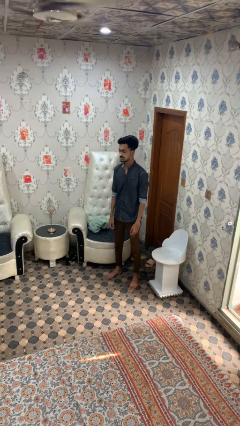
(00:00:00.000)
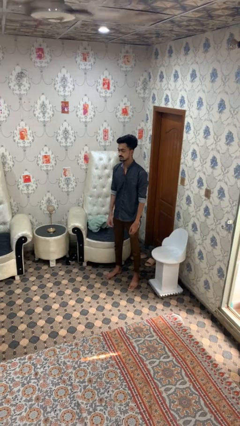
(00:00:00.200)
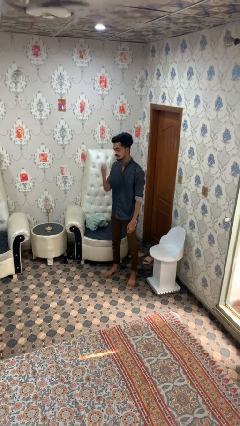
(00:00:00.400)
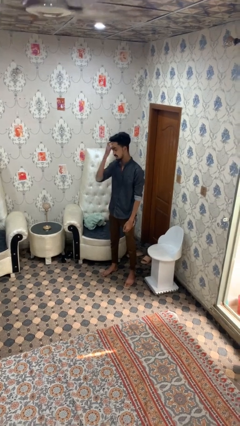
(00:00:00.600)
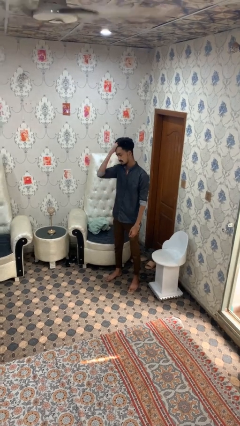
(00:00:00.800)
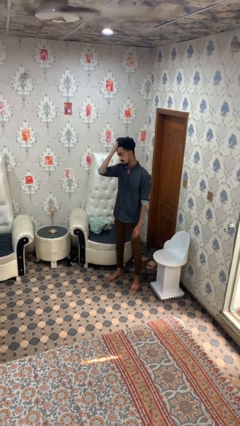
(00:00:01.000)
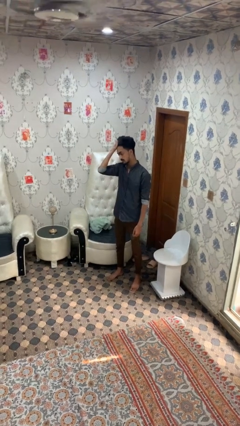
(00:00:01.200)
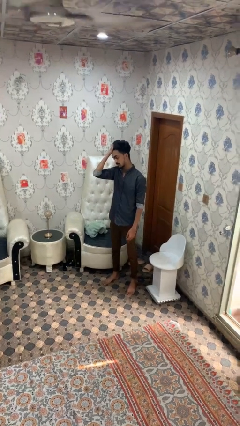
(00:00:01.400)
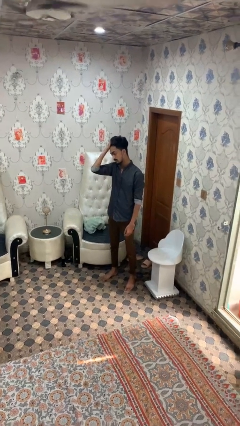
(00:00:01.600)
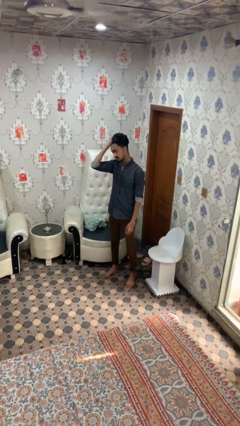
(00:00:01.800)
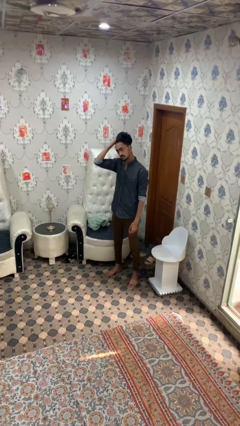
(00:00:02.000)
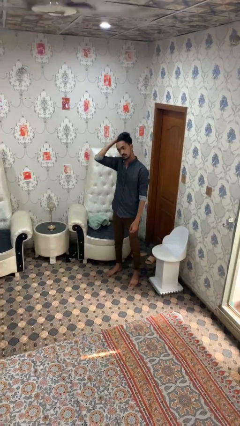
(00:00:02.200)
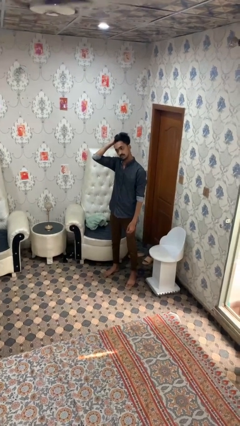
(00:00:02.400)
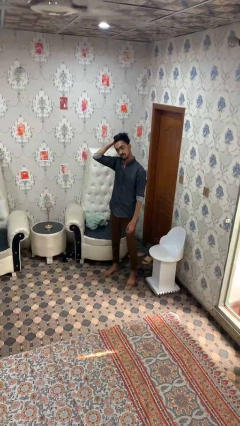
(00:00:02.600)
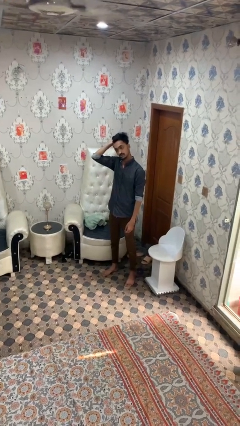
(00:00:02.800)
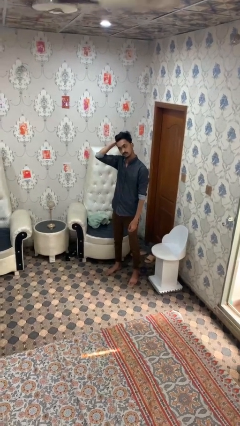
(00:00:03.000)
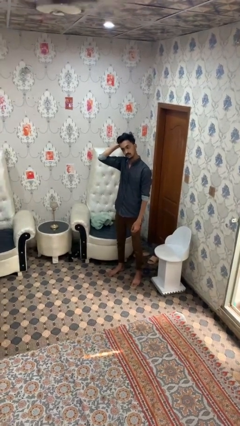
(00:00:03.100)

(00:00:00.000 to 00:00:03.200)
person strokes hair

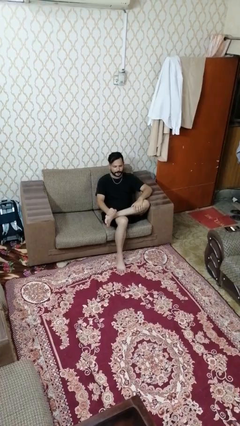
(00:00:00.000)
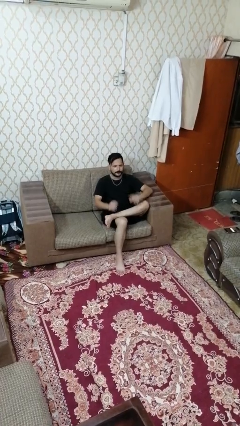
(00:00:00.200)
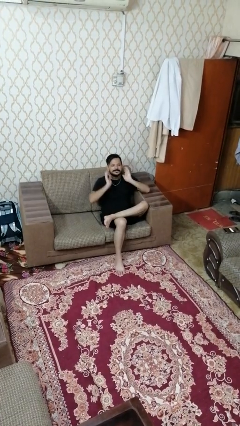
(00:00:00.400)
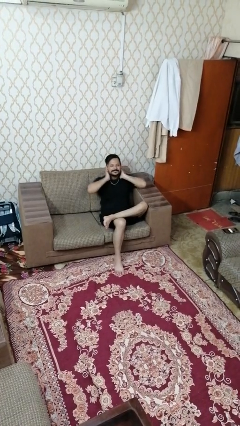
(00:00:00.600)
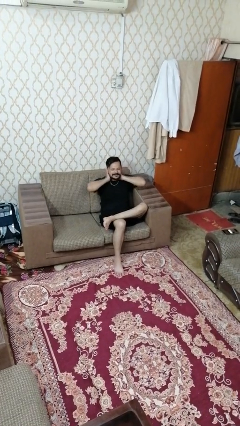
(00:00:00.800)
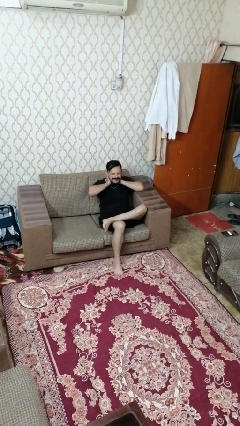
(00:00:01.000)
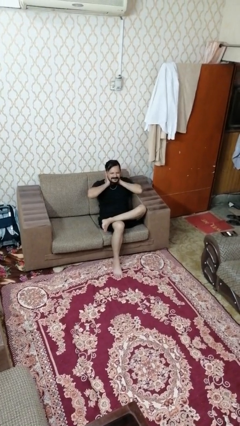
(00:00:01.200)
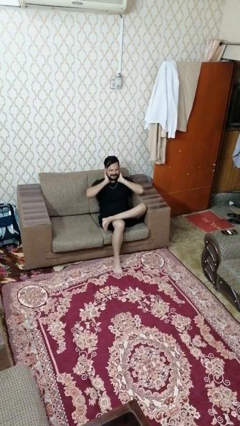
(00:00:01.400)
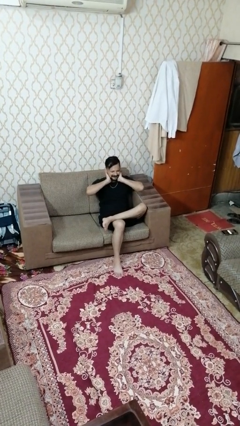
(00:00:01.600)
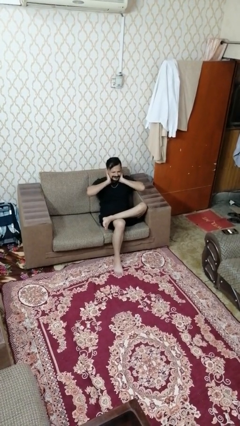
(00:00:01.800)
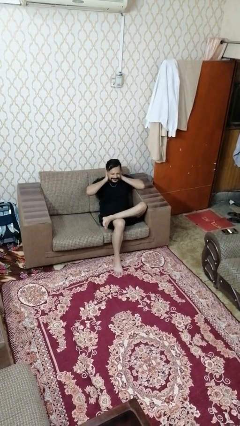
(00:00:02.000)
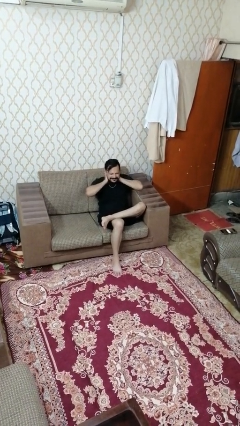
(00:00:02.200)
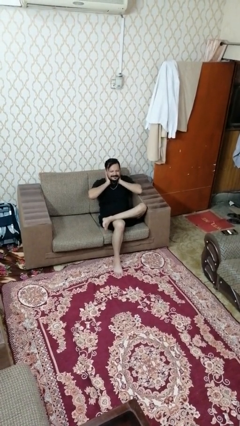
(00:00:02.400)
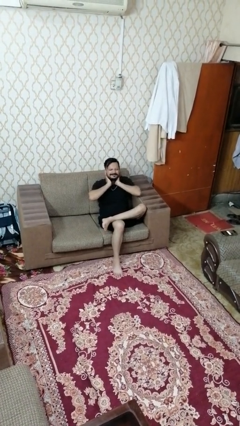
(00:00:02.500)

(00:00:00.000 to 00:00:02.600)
person rubs neck

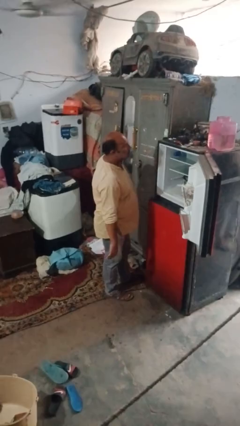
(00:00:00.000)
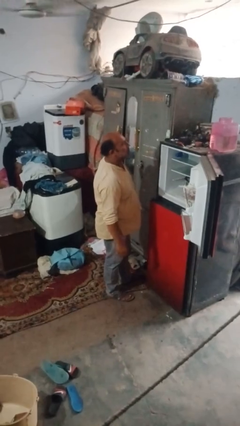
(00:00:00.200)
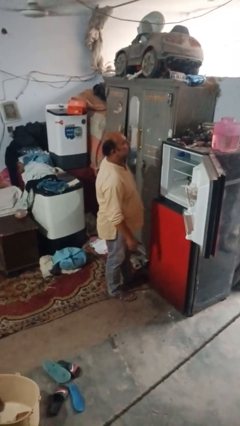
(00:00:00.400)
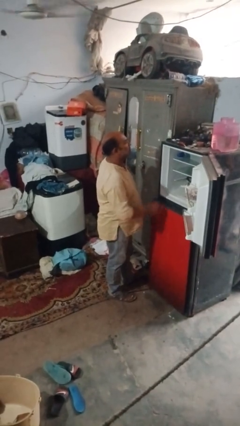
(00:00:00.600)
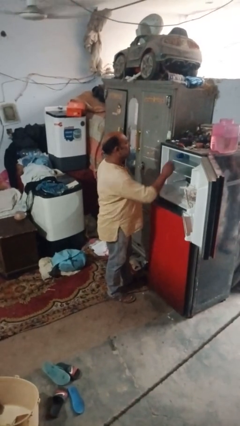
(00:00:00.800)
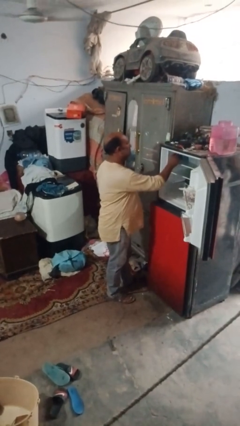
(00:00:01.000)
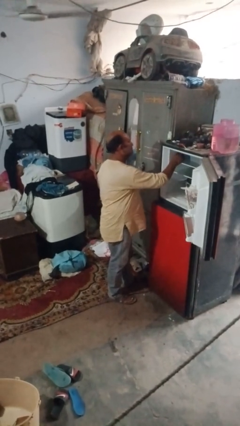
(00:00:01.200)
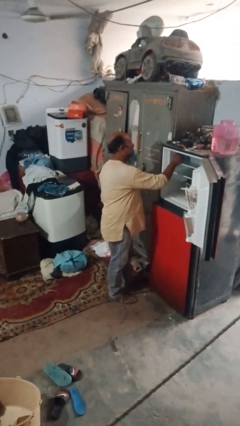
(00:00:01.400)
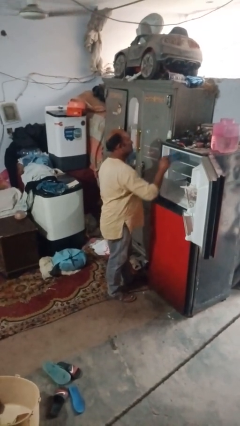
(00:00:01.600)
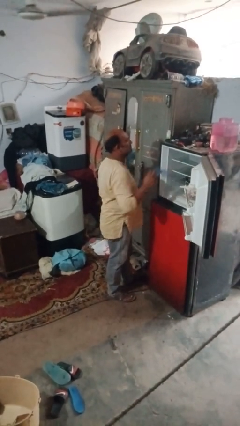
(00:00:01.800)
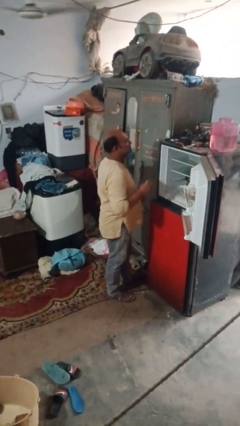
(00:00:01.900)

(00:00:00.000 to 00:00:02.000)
person takes object from refrigerator

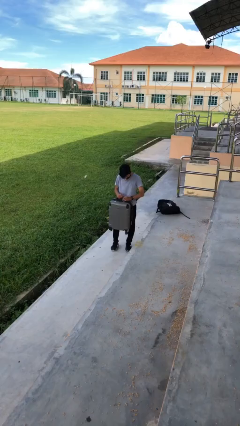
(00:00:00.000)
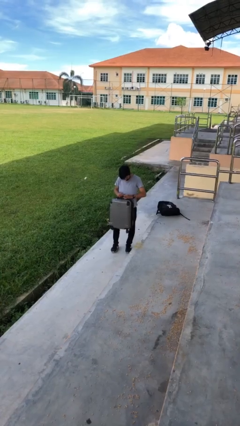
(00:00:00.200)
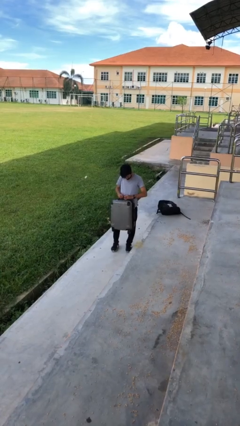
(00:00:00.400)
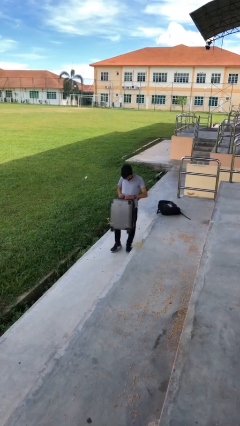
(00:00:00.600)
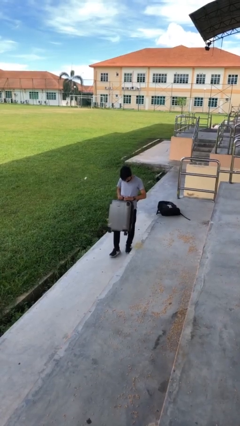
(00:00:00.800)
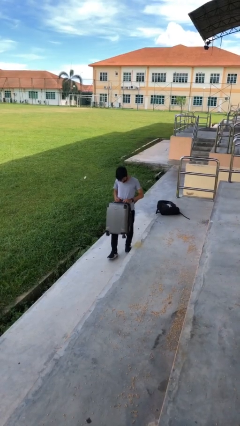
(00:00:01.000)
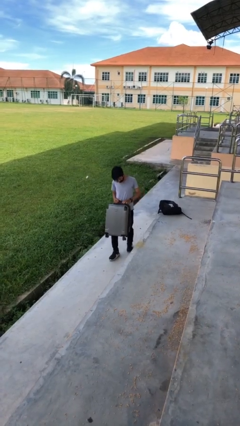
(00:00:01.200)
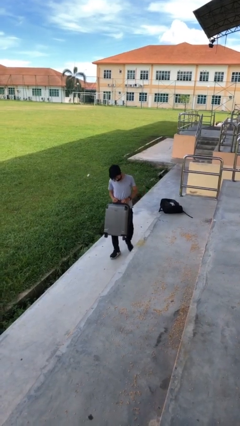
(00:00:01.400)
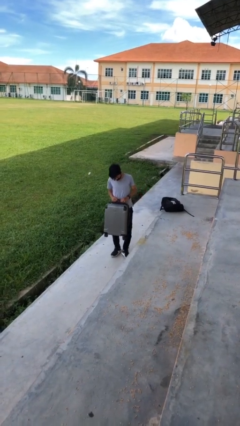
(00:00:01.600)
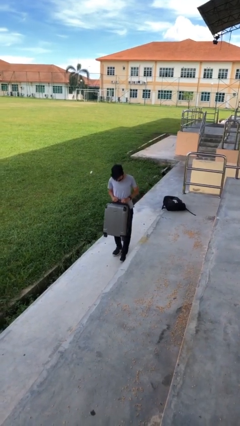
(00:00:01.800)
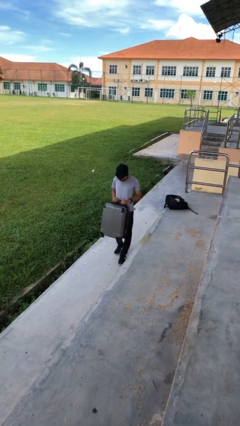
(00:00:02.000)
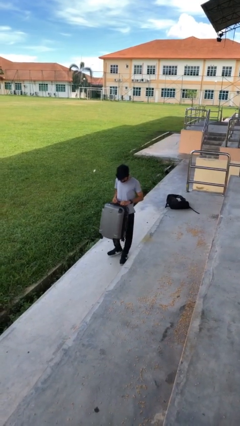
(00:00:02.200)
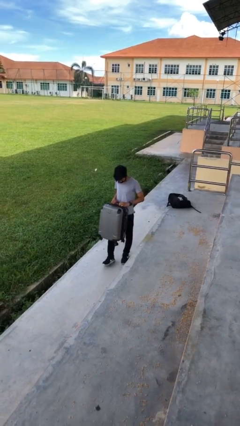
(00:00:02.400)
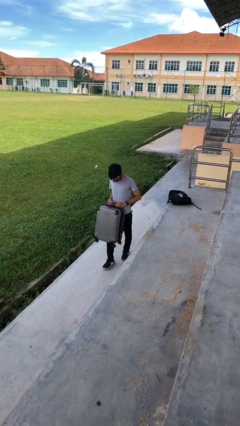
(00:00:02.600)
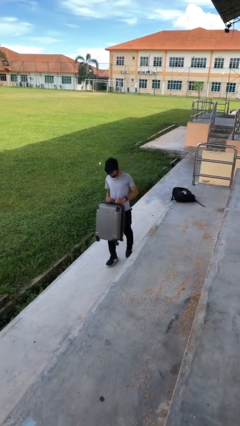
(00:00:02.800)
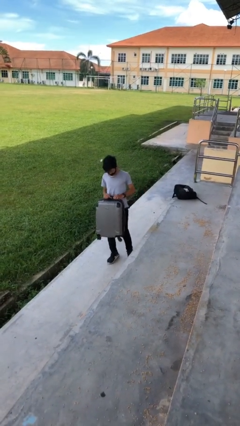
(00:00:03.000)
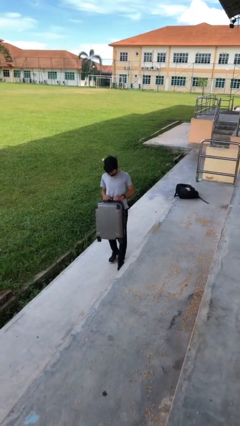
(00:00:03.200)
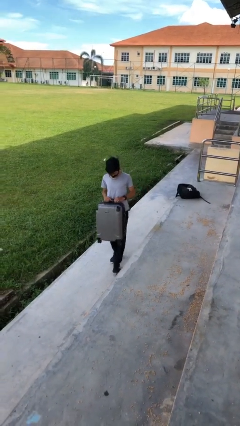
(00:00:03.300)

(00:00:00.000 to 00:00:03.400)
person carries heavy object

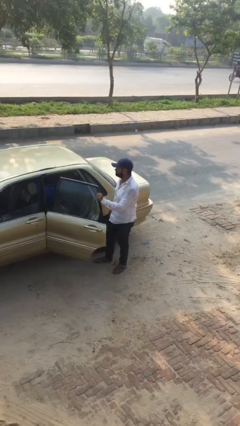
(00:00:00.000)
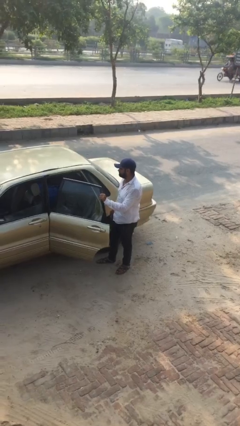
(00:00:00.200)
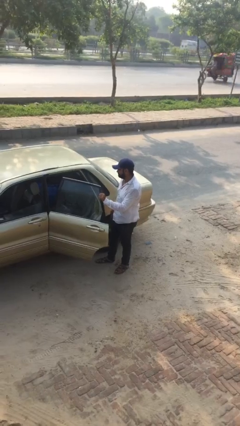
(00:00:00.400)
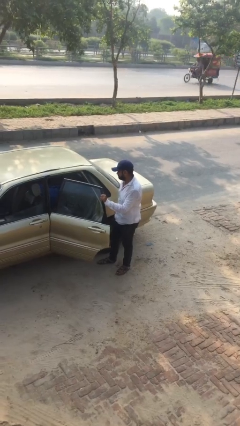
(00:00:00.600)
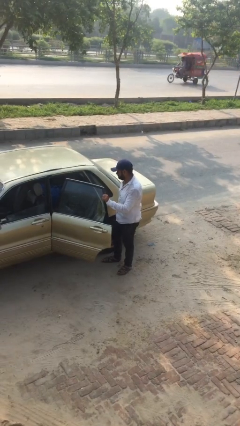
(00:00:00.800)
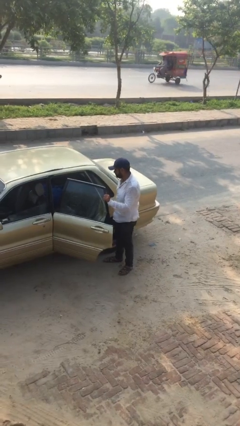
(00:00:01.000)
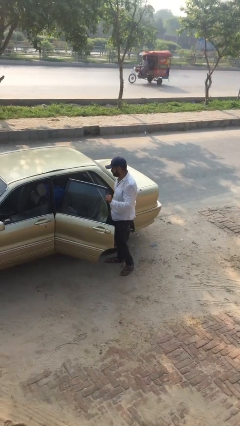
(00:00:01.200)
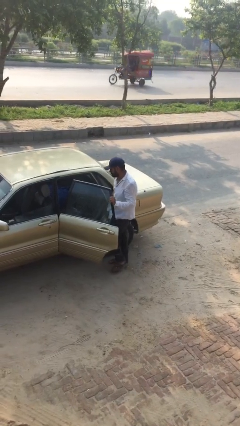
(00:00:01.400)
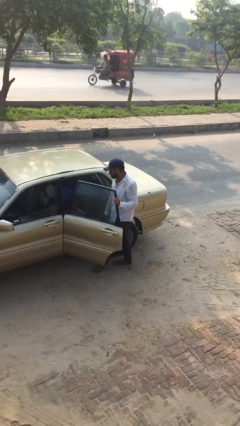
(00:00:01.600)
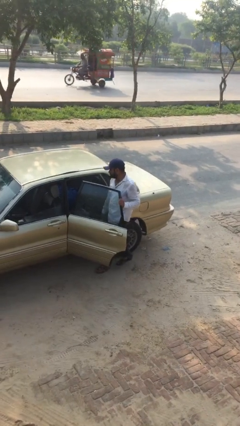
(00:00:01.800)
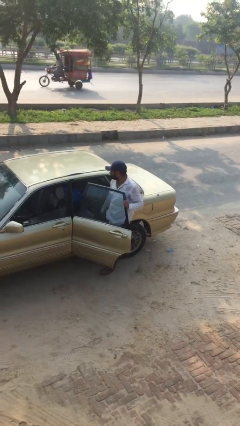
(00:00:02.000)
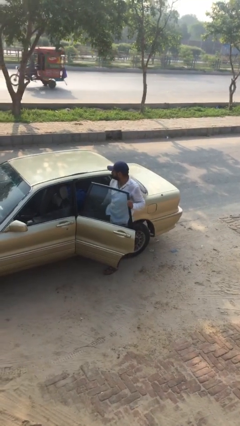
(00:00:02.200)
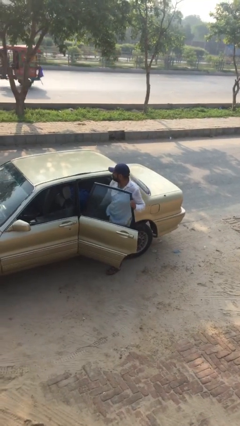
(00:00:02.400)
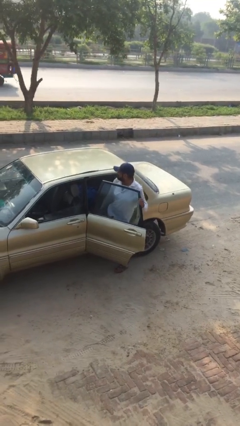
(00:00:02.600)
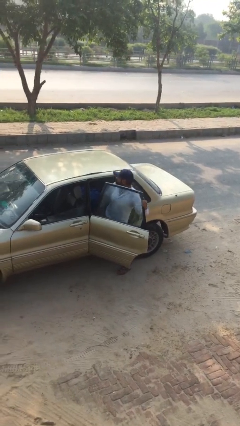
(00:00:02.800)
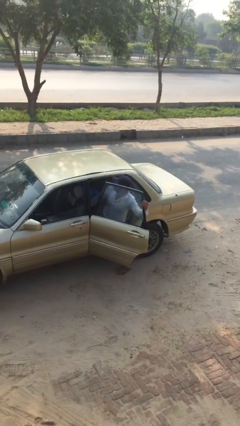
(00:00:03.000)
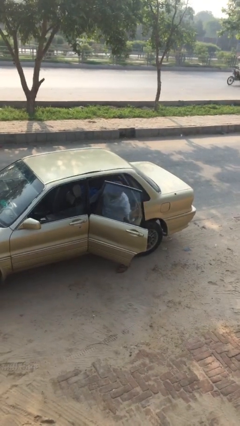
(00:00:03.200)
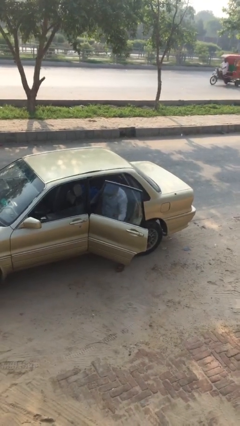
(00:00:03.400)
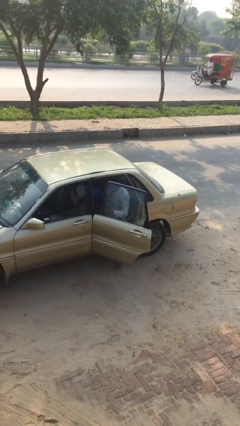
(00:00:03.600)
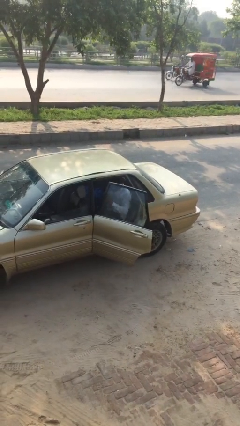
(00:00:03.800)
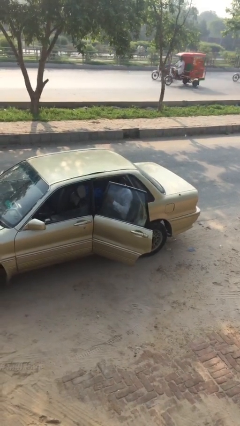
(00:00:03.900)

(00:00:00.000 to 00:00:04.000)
person enters car

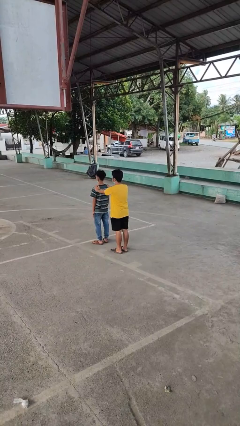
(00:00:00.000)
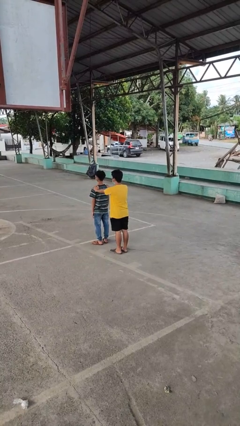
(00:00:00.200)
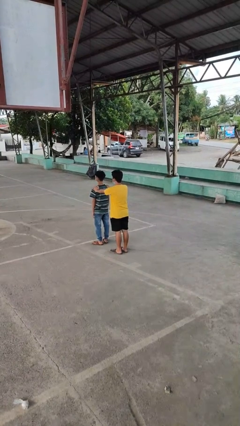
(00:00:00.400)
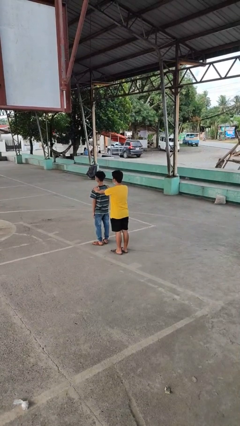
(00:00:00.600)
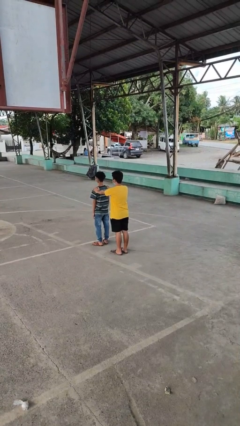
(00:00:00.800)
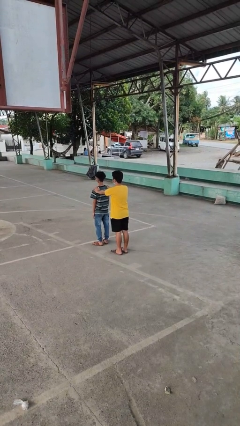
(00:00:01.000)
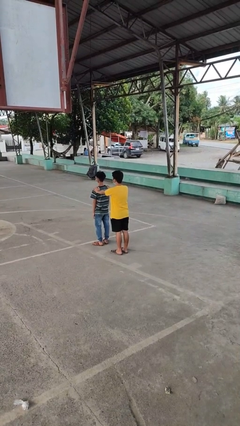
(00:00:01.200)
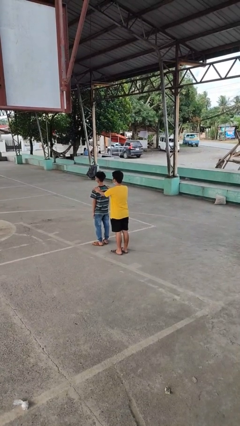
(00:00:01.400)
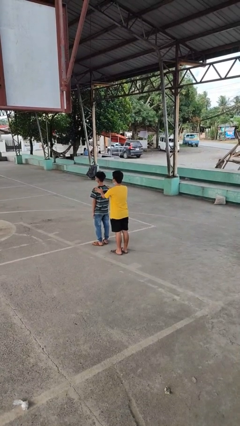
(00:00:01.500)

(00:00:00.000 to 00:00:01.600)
person grabs person by shoulder

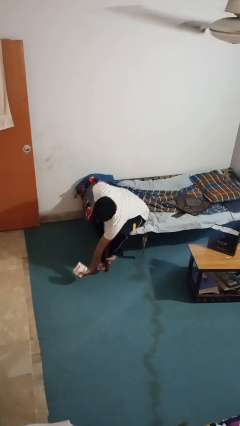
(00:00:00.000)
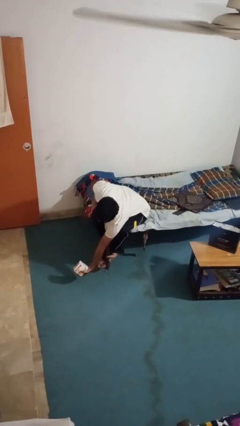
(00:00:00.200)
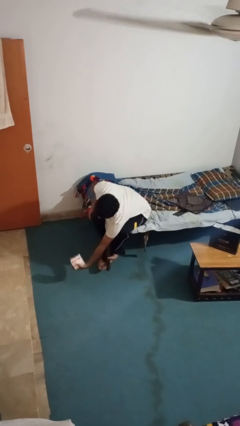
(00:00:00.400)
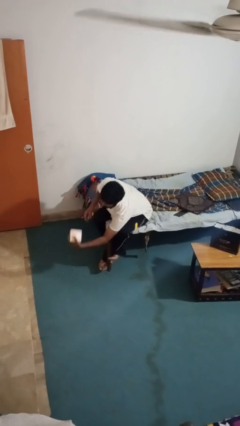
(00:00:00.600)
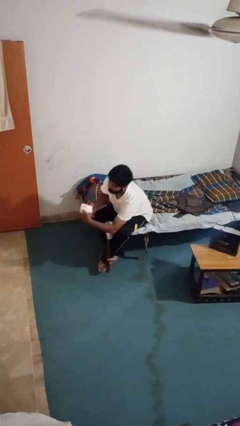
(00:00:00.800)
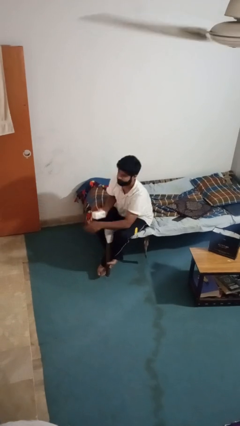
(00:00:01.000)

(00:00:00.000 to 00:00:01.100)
person catches dropped object
